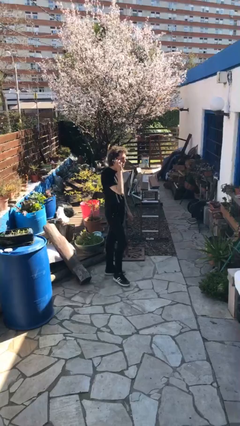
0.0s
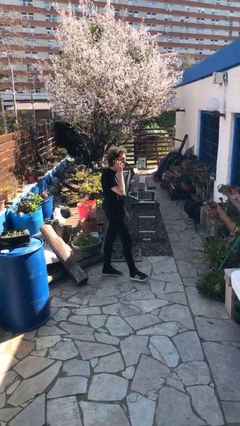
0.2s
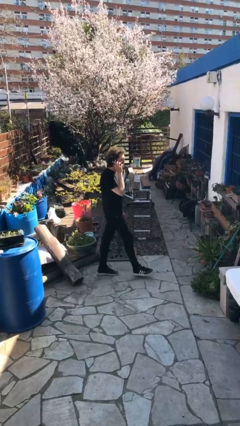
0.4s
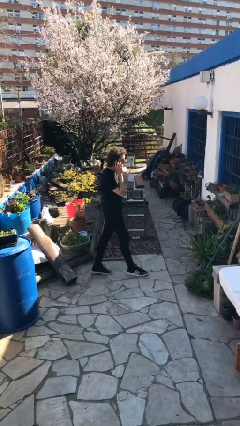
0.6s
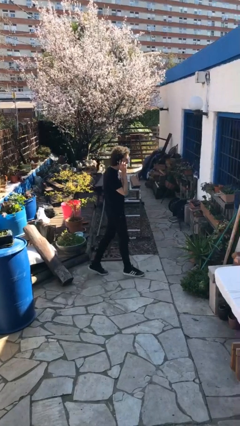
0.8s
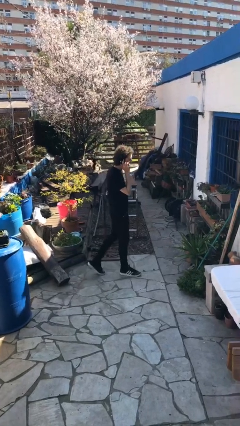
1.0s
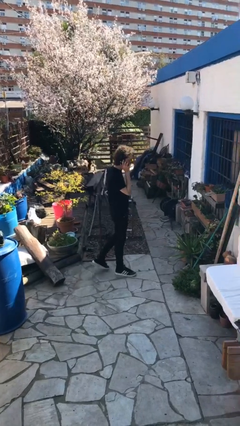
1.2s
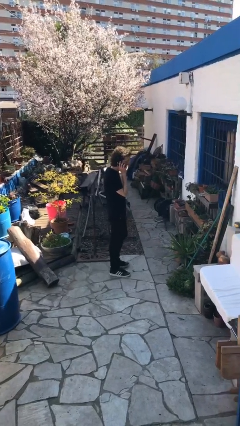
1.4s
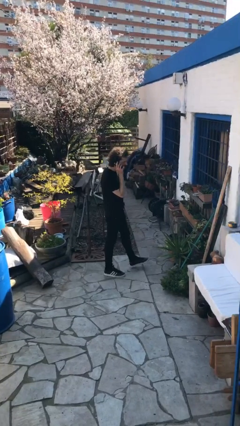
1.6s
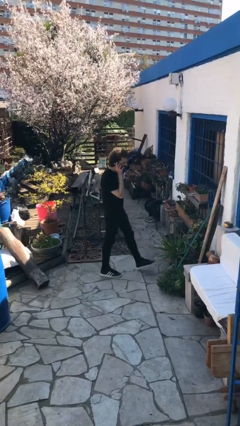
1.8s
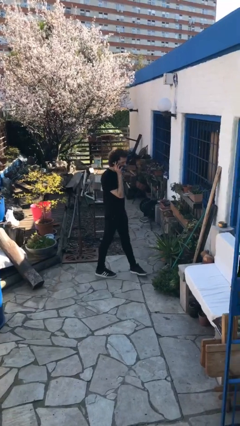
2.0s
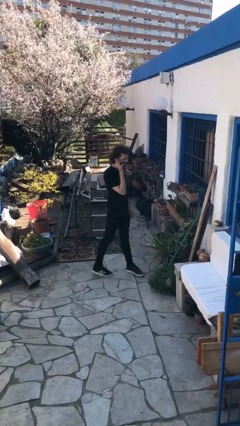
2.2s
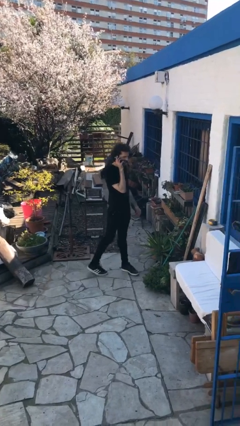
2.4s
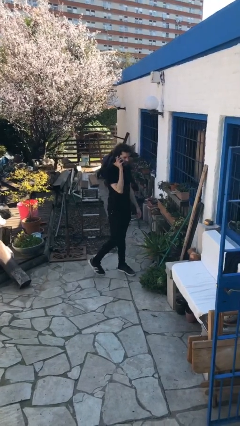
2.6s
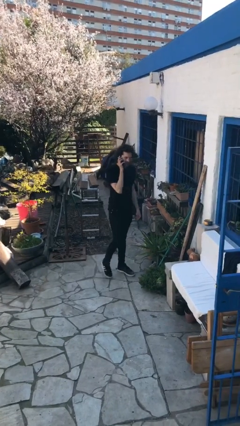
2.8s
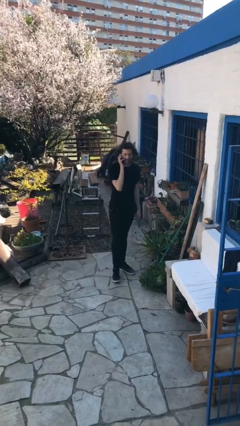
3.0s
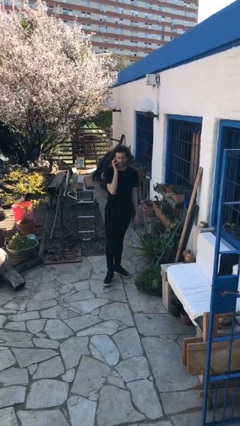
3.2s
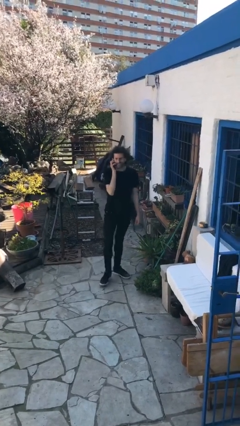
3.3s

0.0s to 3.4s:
person talks on phone

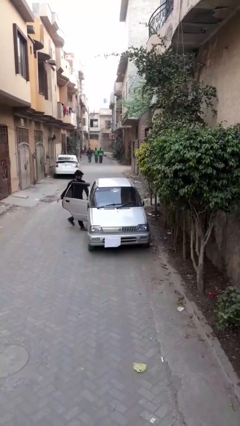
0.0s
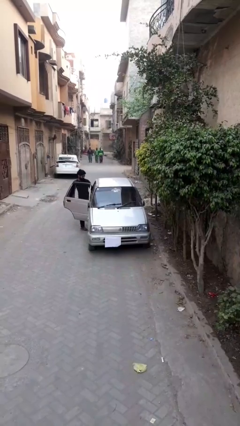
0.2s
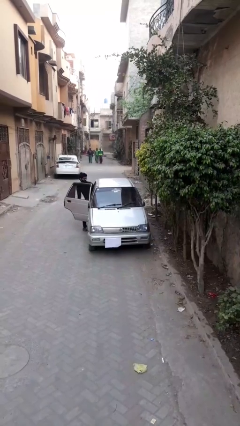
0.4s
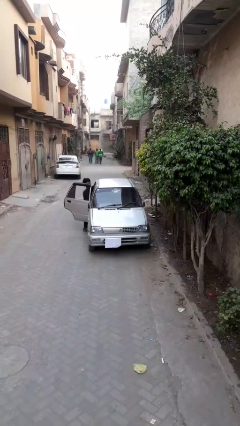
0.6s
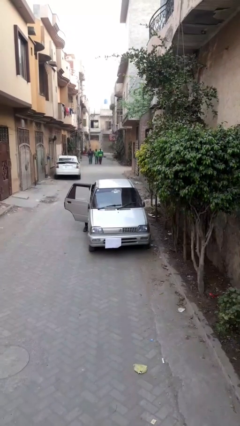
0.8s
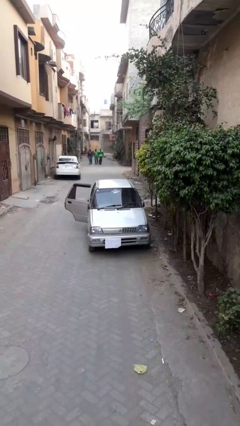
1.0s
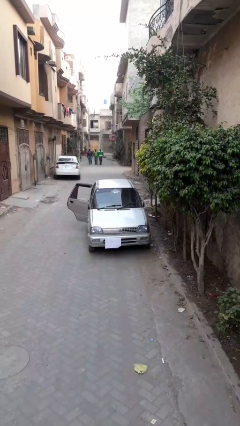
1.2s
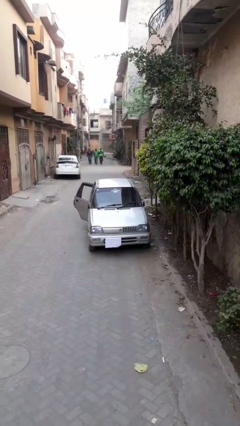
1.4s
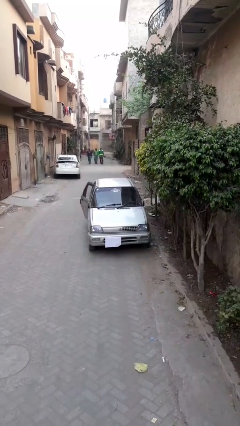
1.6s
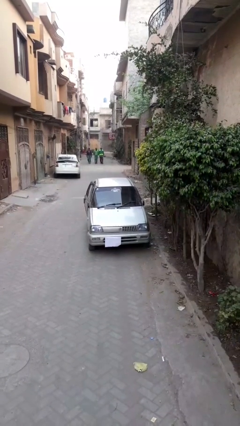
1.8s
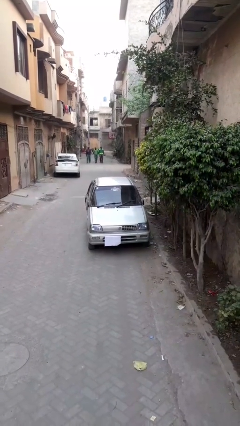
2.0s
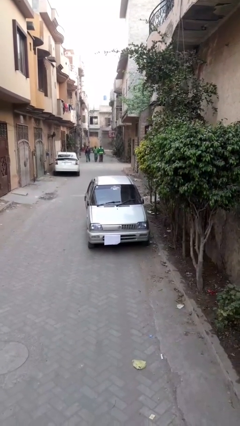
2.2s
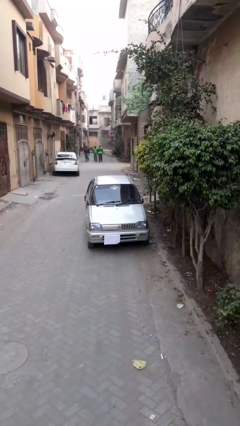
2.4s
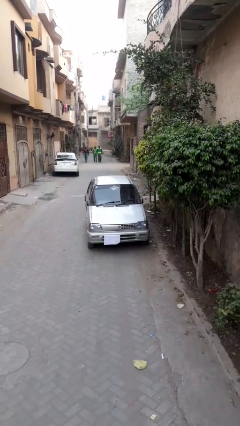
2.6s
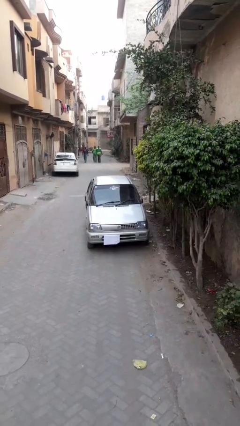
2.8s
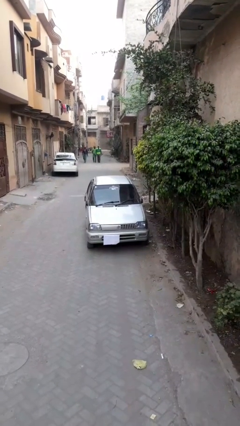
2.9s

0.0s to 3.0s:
car picks up person

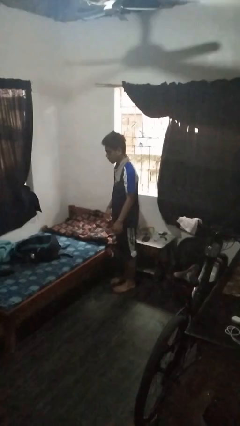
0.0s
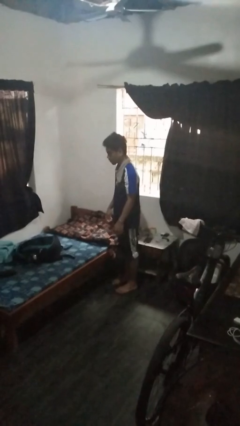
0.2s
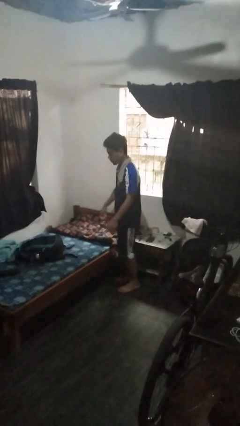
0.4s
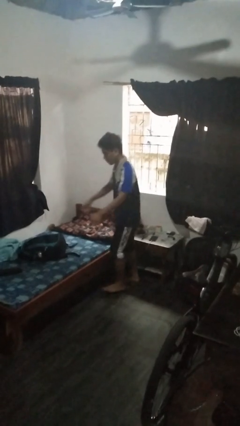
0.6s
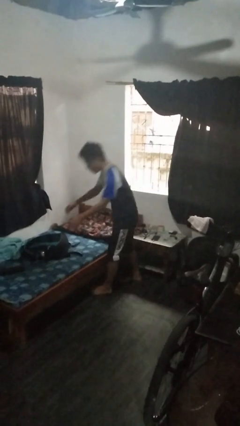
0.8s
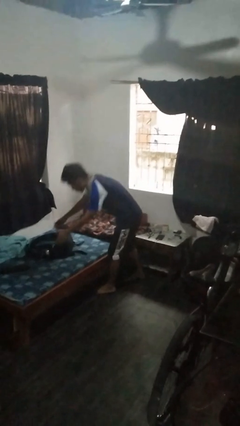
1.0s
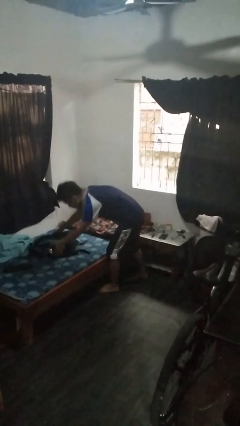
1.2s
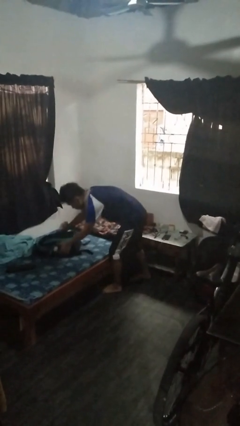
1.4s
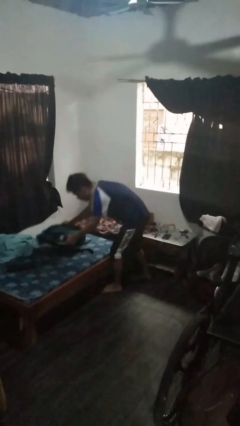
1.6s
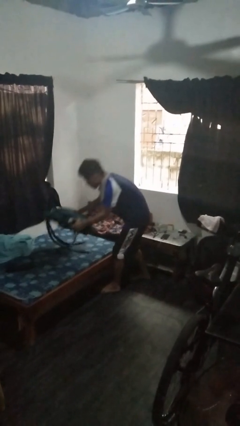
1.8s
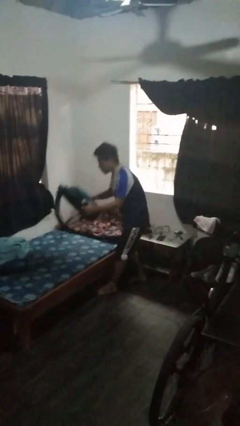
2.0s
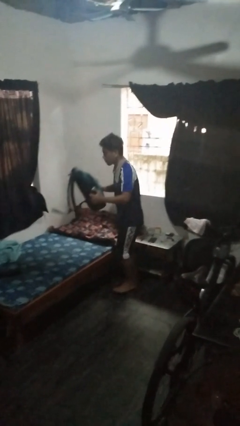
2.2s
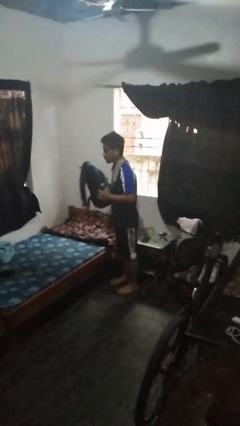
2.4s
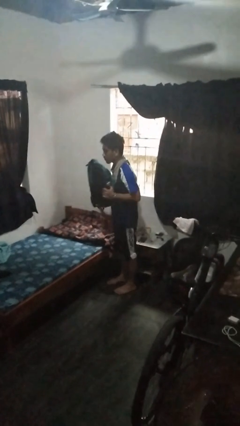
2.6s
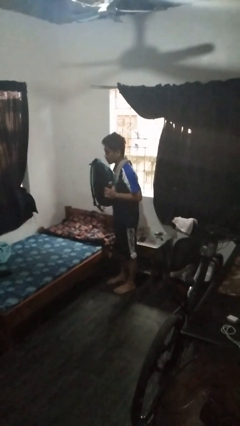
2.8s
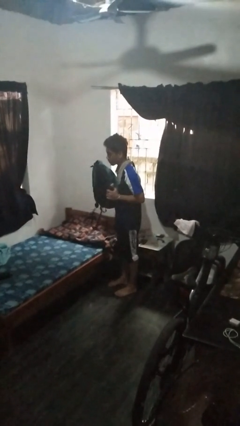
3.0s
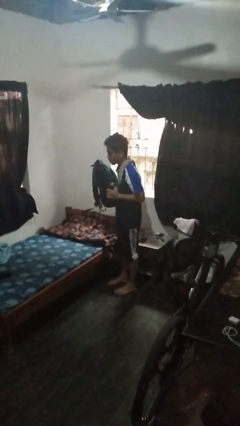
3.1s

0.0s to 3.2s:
person picks up object from bed

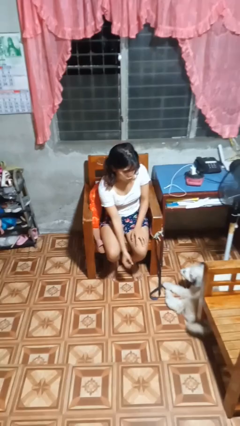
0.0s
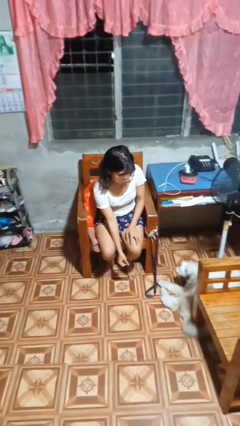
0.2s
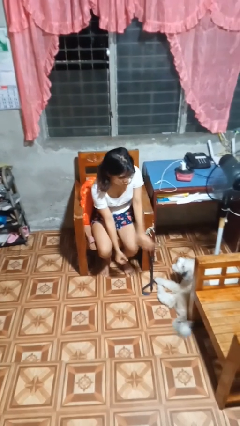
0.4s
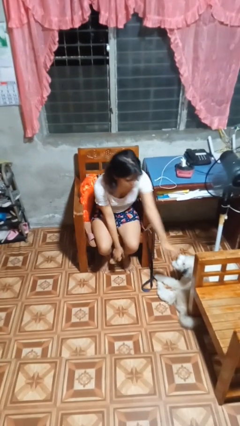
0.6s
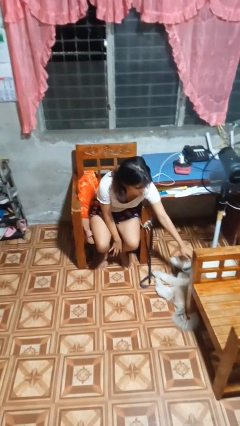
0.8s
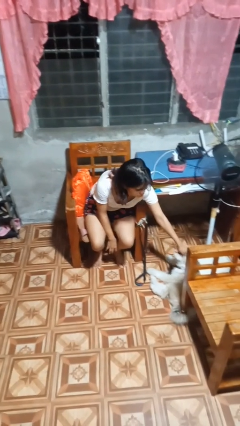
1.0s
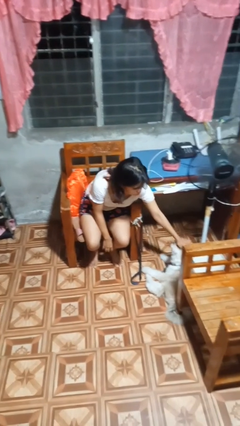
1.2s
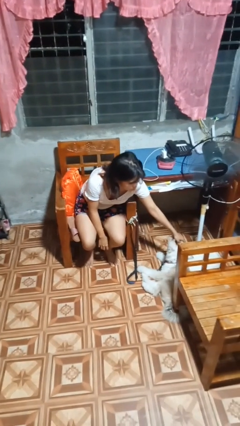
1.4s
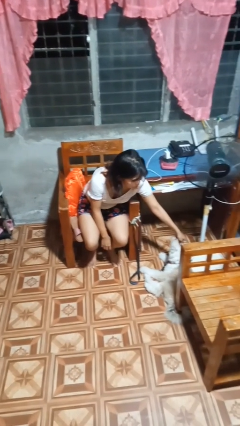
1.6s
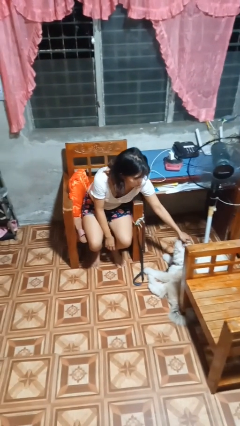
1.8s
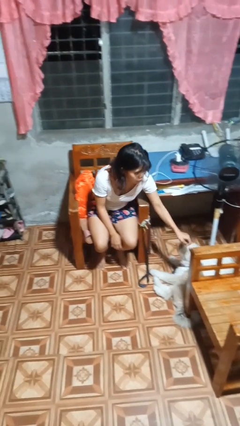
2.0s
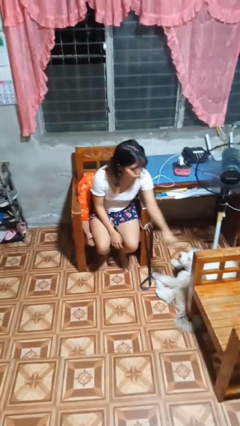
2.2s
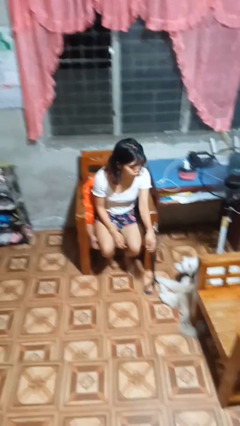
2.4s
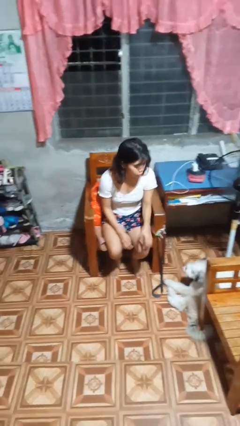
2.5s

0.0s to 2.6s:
person pets dog

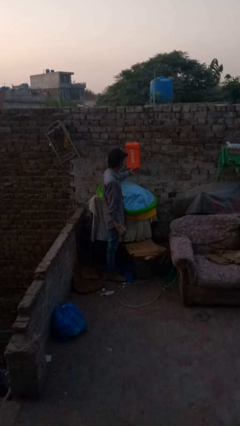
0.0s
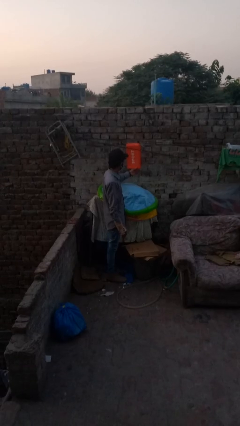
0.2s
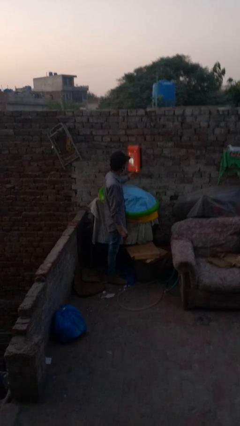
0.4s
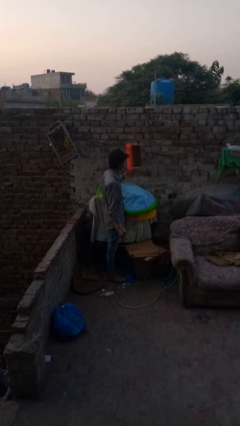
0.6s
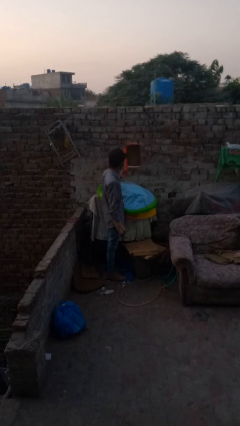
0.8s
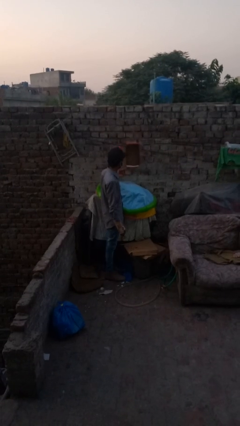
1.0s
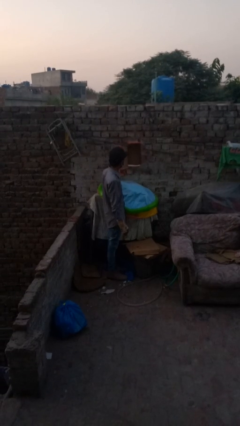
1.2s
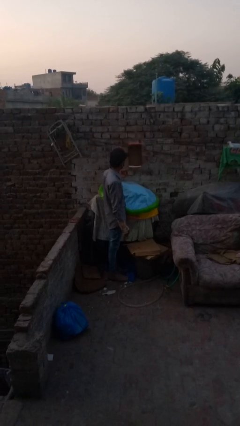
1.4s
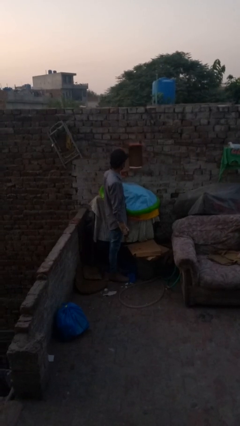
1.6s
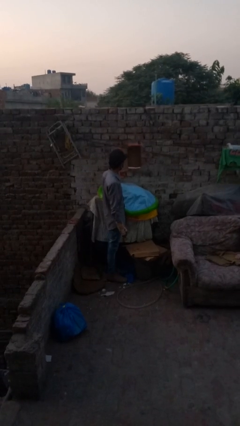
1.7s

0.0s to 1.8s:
person opens mailbox

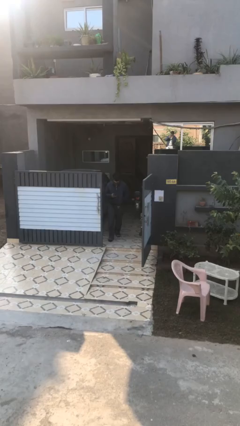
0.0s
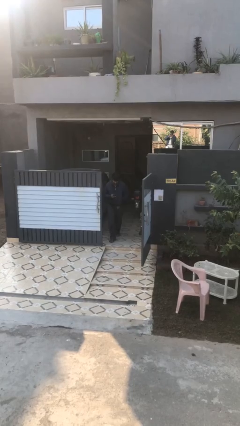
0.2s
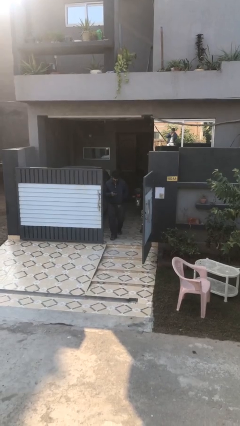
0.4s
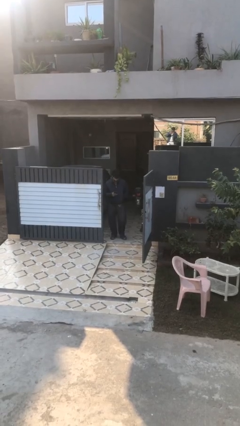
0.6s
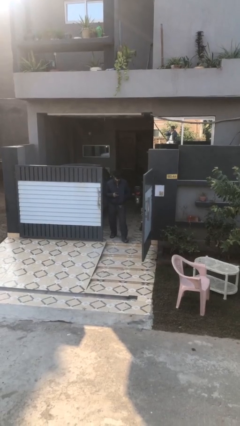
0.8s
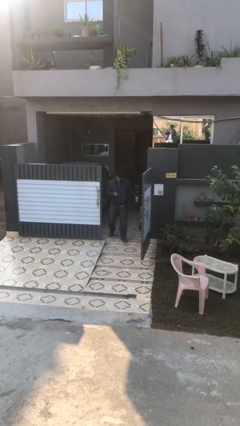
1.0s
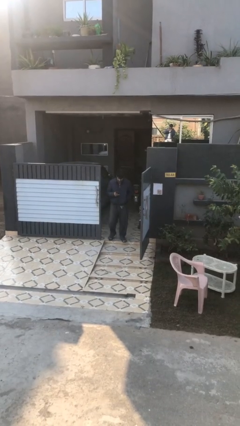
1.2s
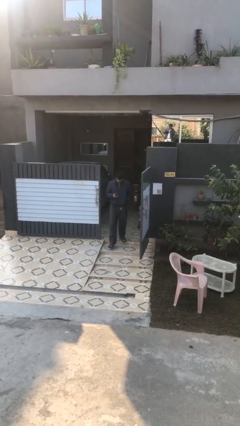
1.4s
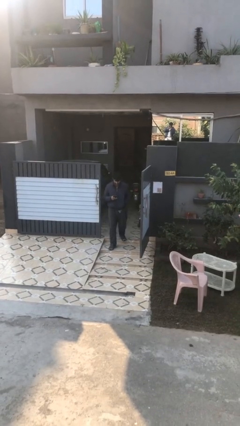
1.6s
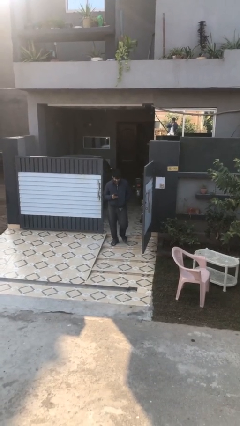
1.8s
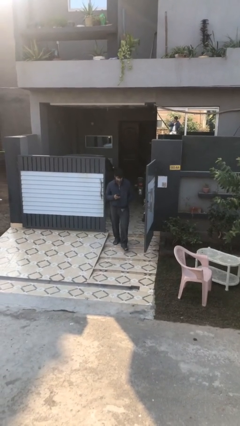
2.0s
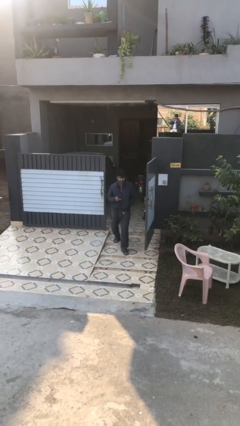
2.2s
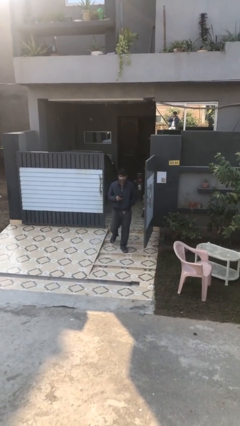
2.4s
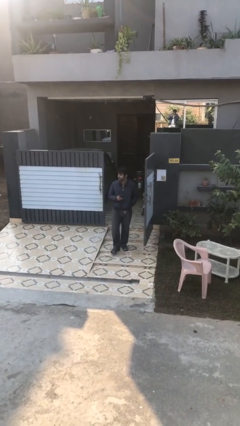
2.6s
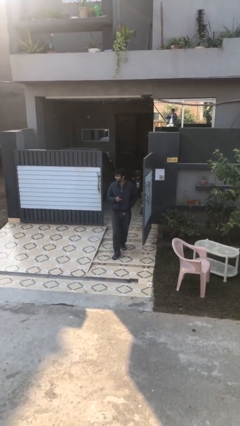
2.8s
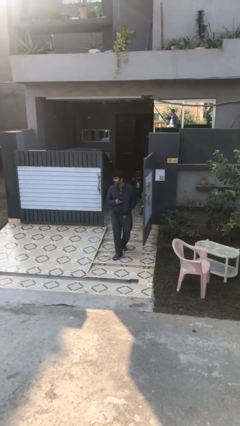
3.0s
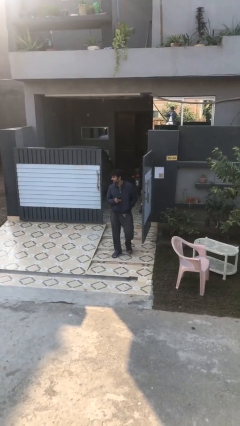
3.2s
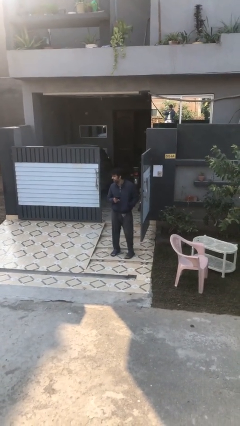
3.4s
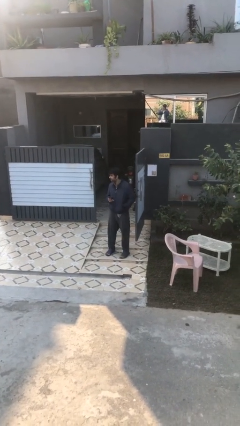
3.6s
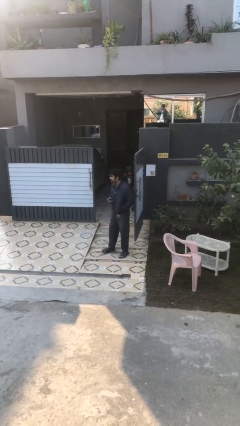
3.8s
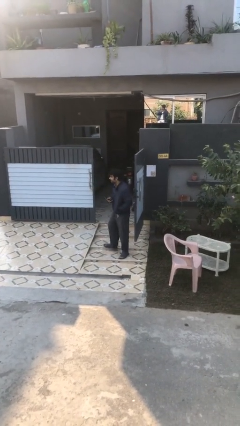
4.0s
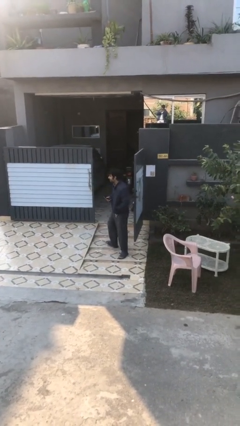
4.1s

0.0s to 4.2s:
person enters scene through structure
